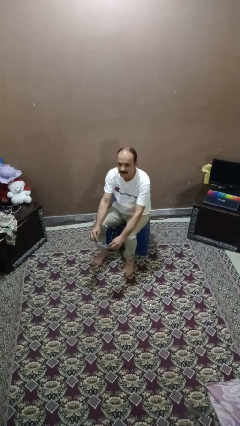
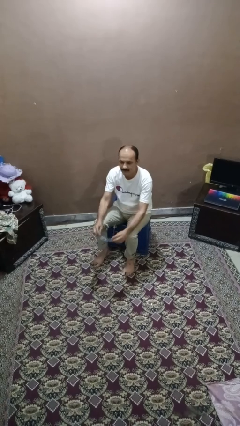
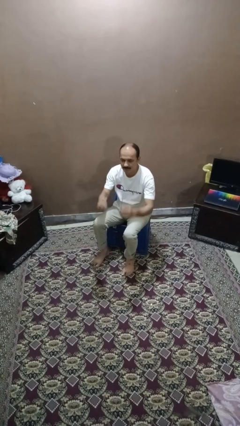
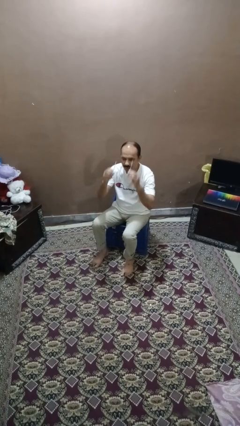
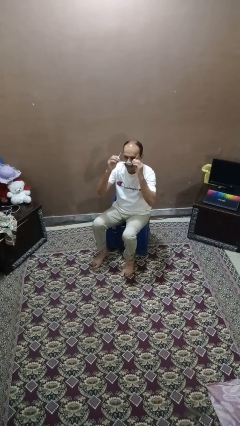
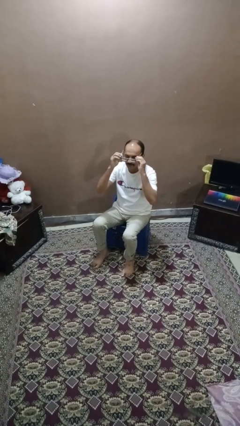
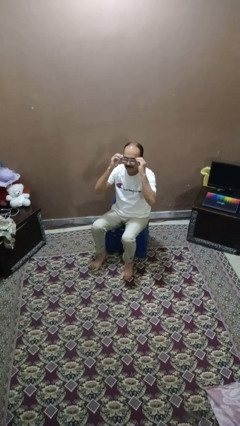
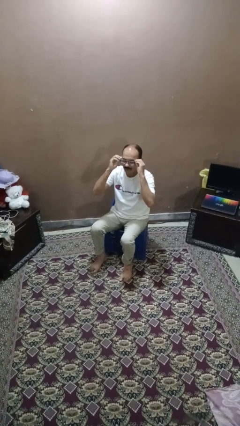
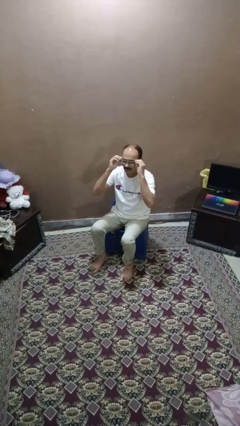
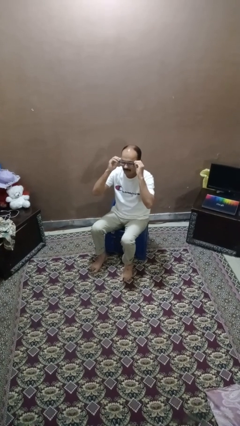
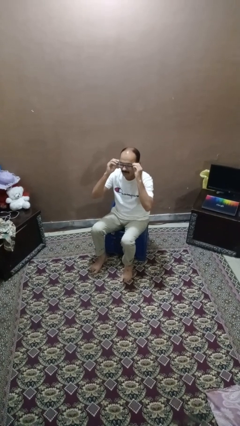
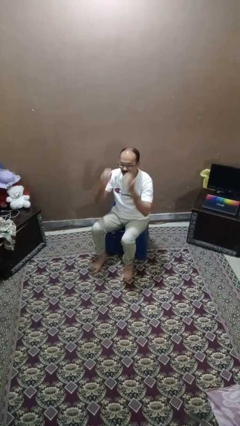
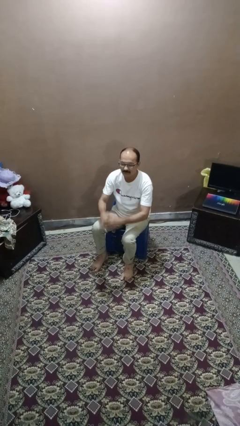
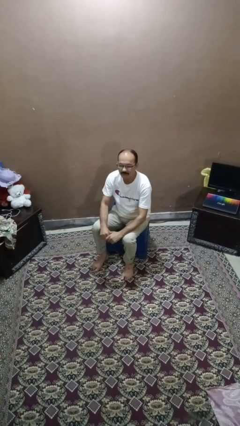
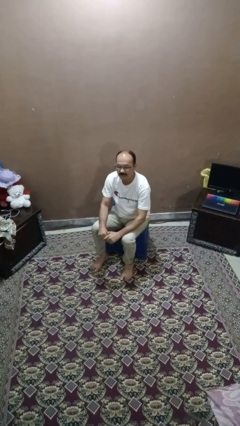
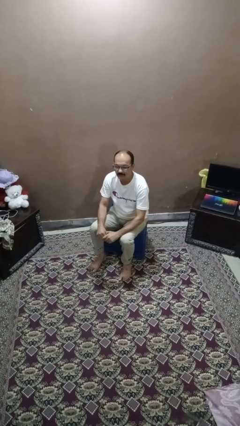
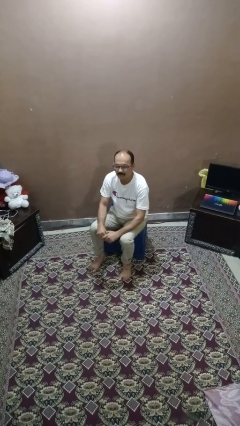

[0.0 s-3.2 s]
person puts on glasses

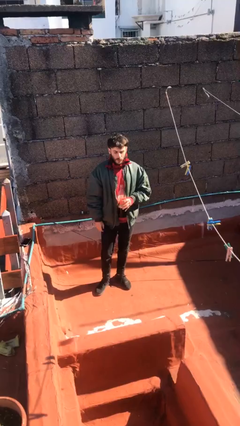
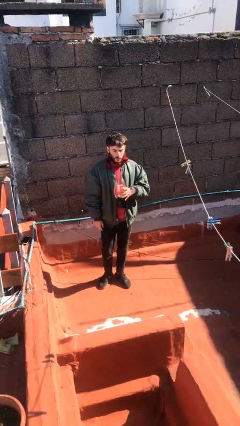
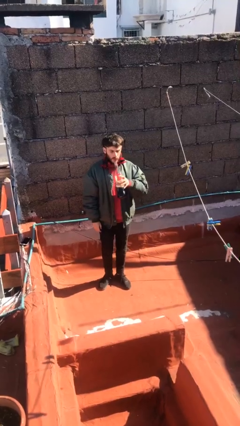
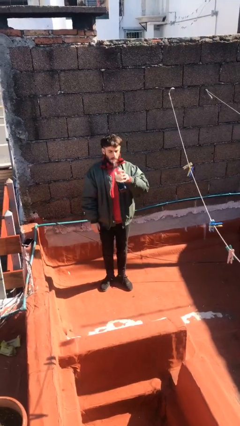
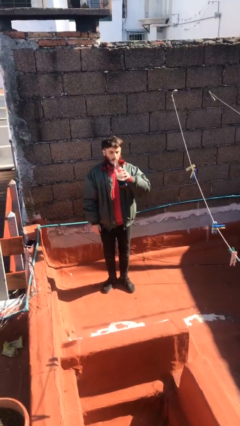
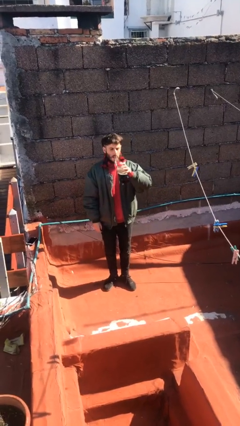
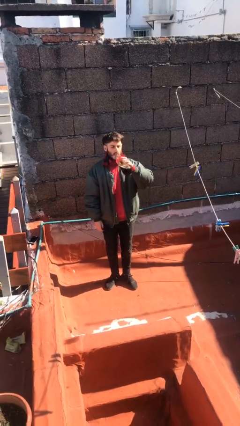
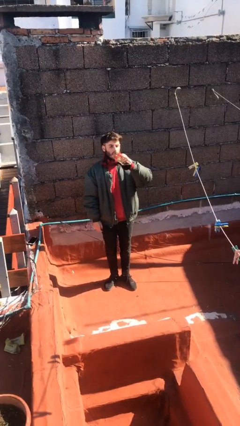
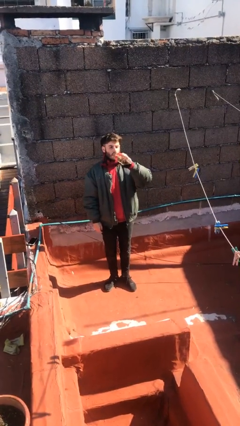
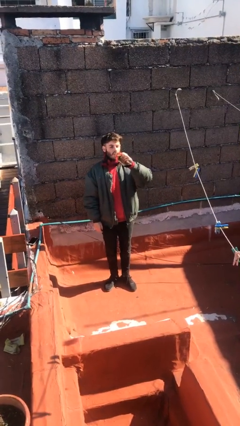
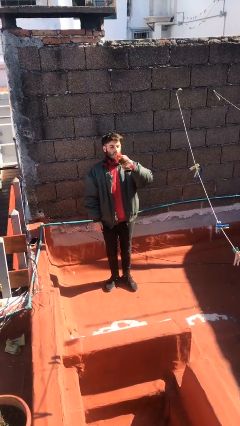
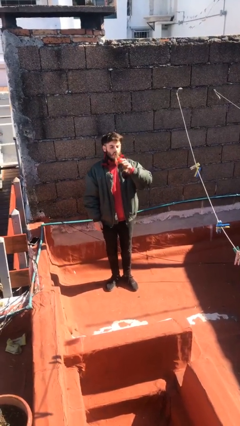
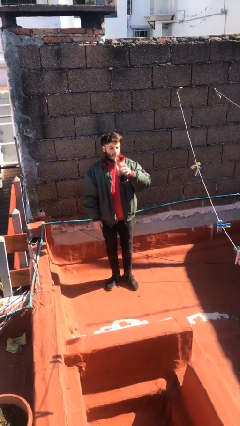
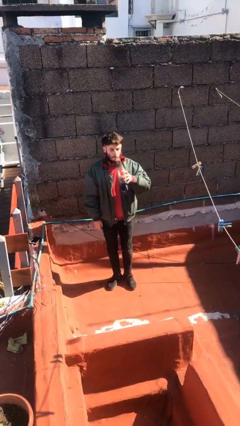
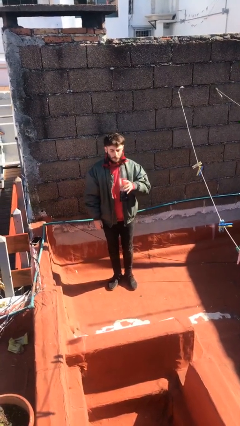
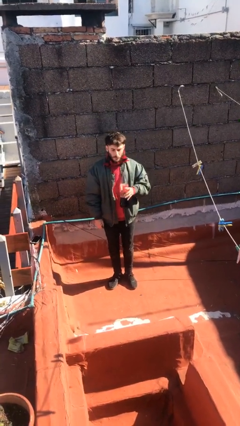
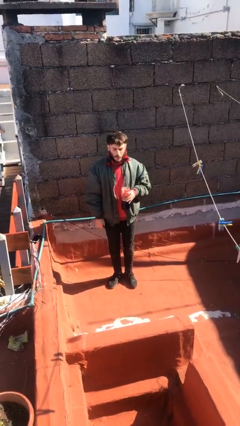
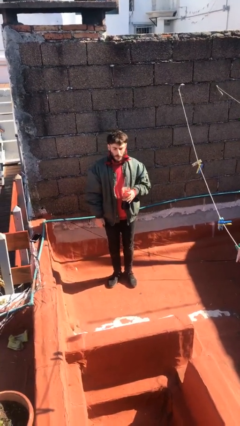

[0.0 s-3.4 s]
person drinks from bottle

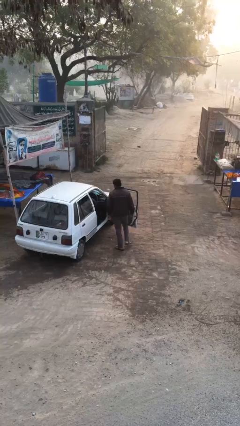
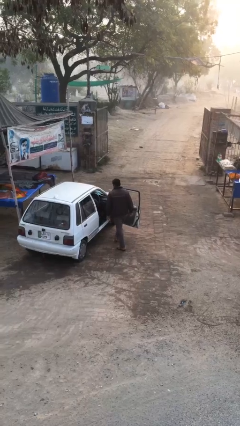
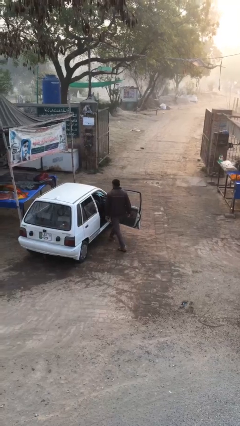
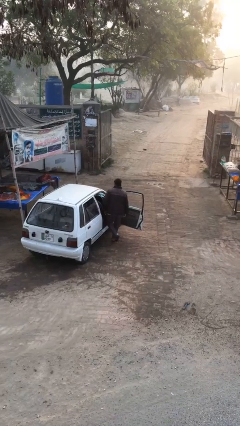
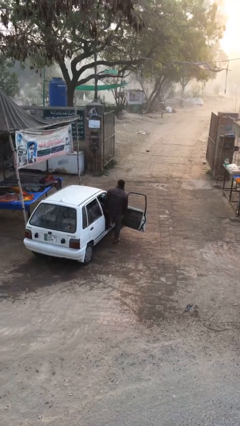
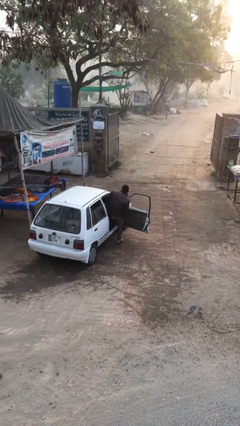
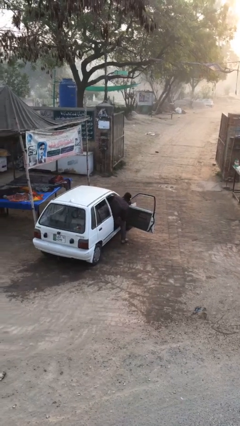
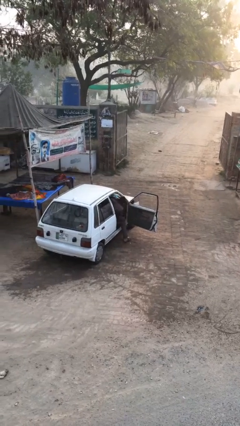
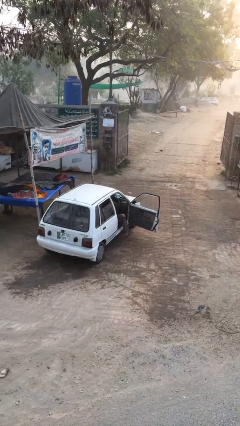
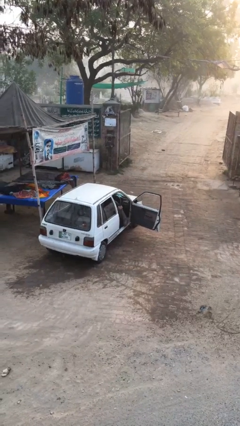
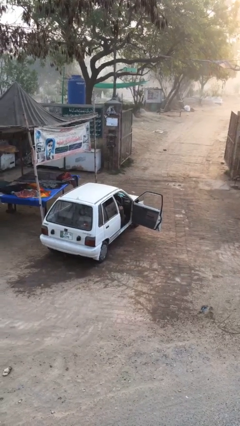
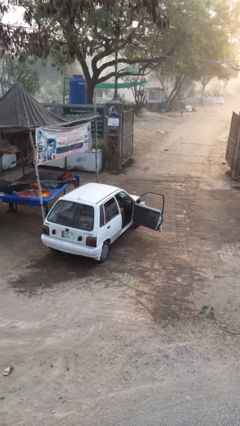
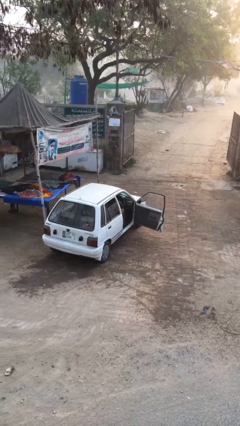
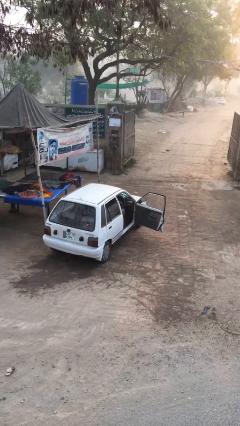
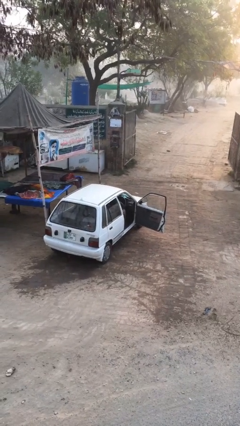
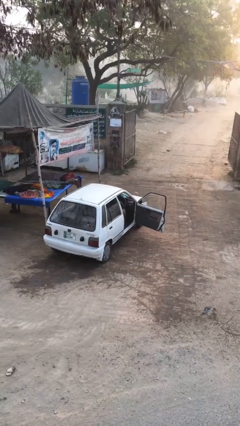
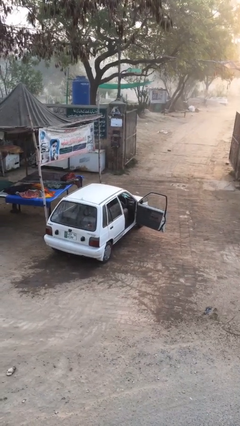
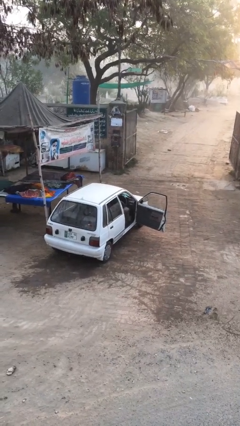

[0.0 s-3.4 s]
person enters car

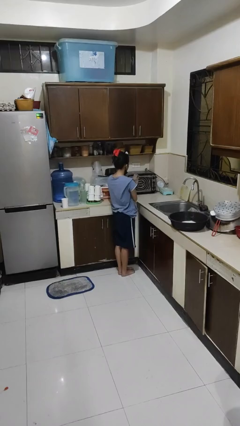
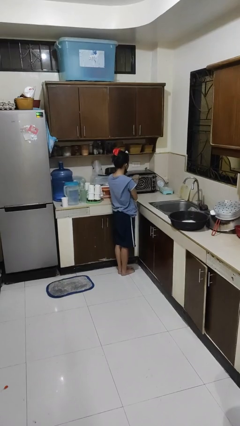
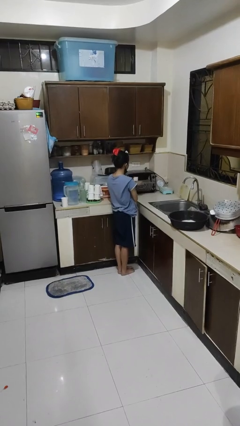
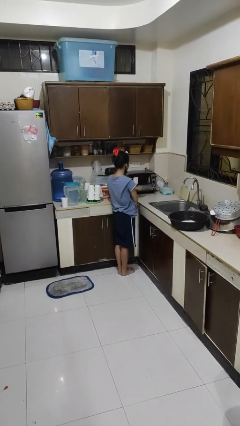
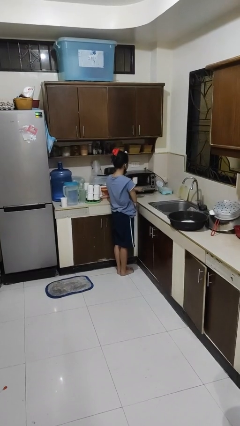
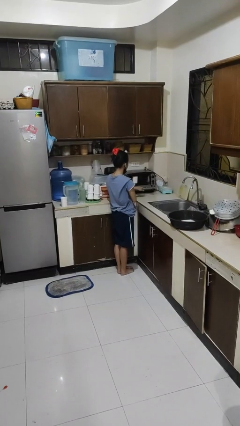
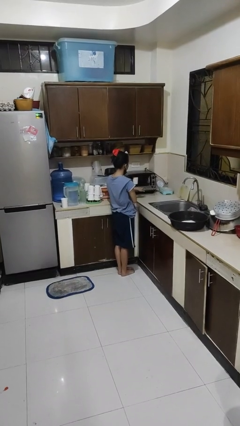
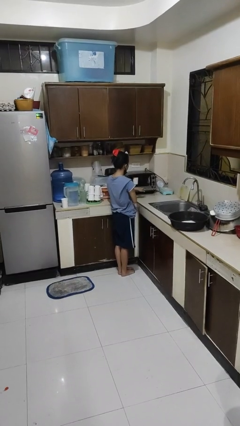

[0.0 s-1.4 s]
person opens microwave

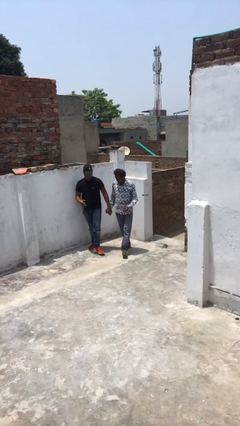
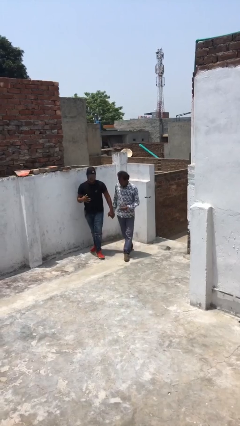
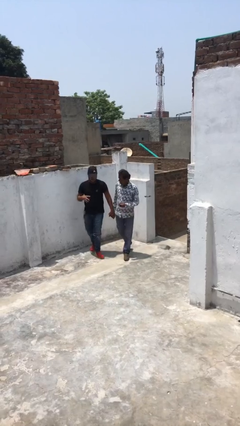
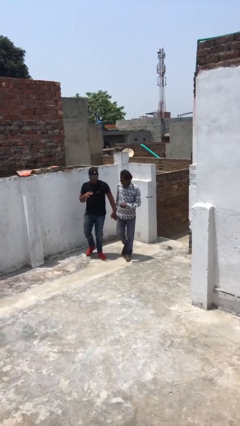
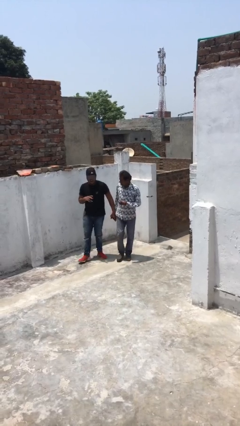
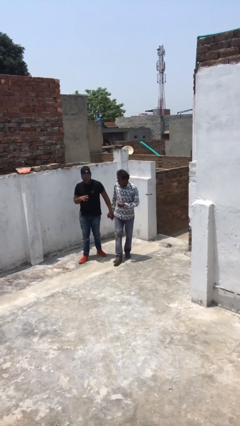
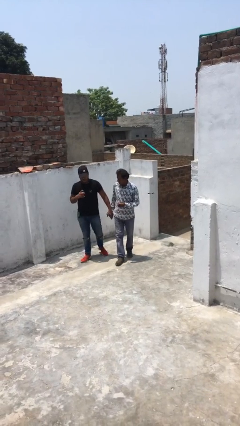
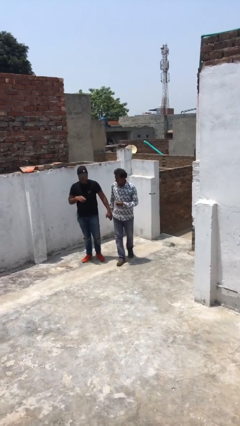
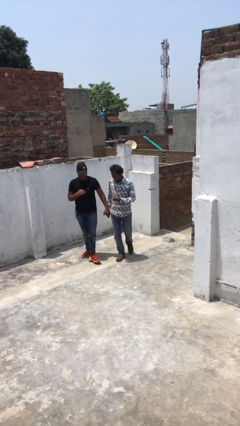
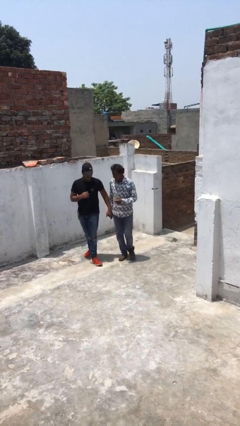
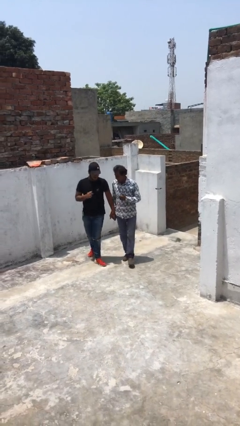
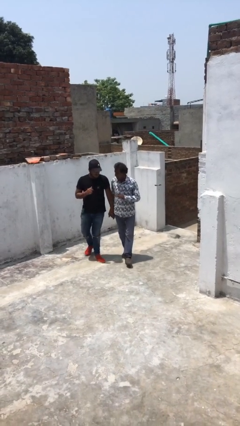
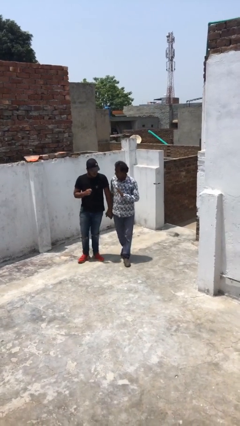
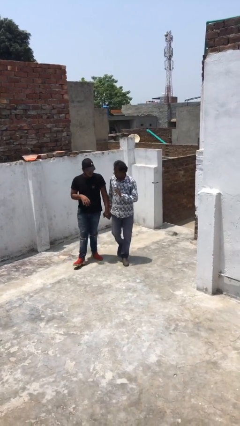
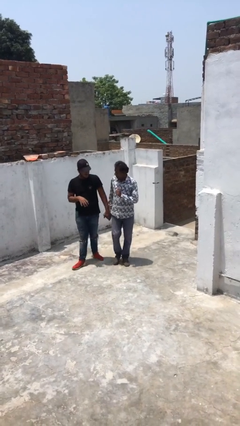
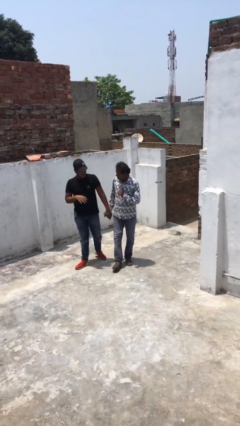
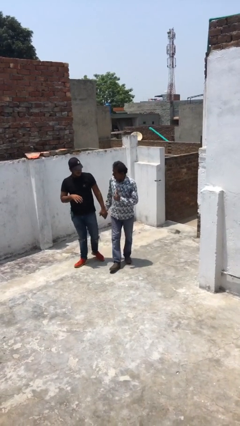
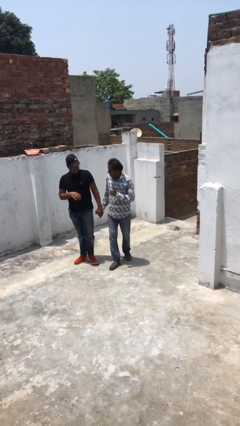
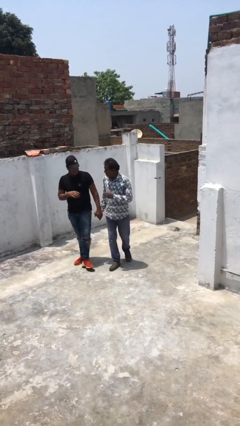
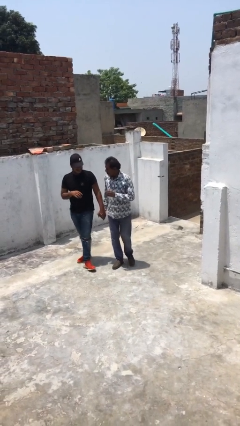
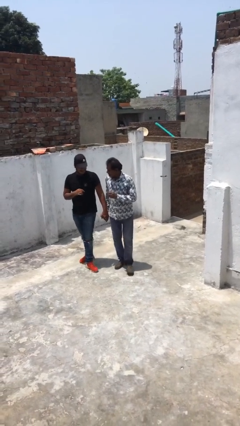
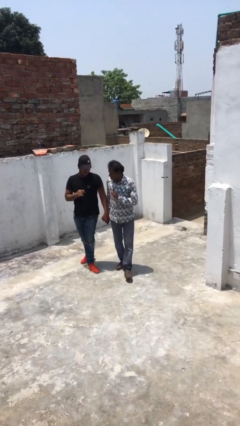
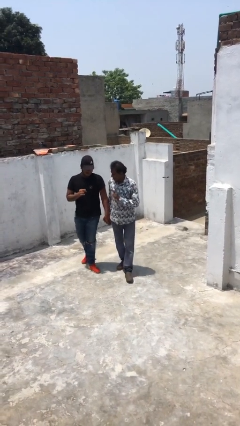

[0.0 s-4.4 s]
person holds hand

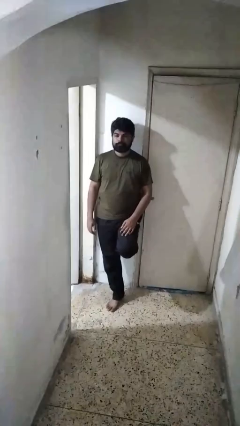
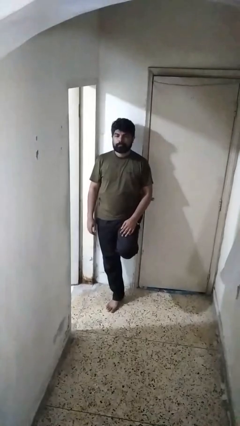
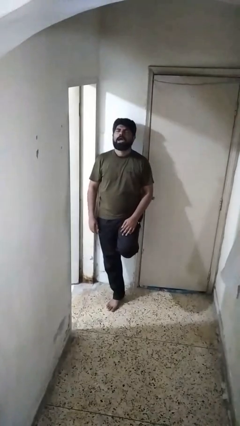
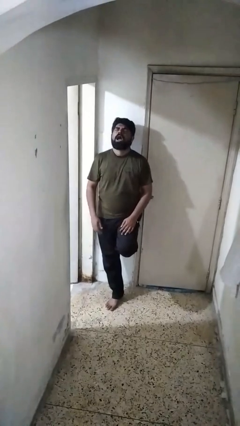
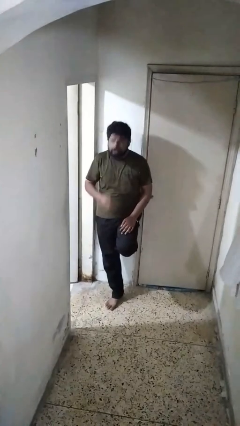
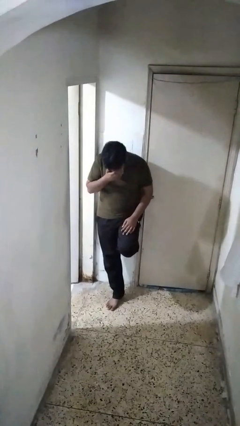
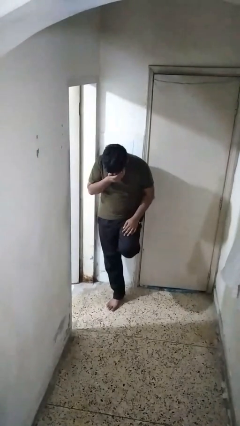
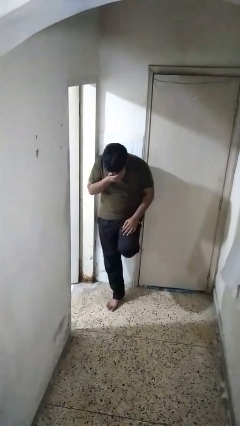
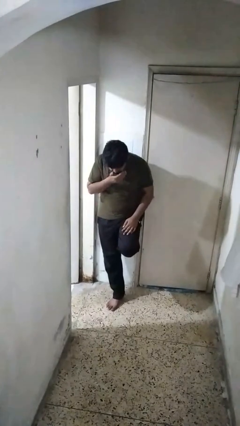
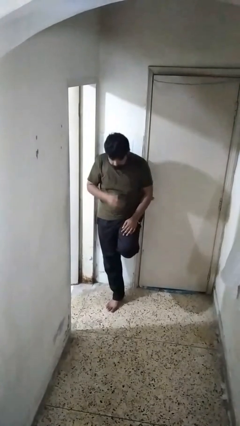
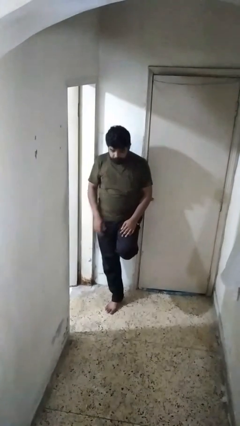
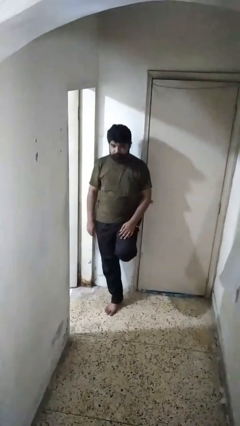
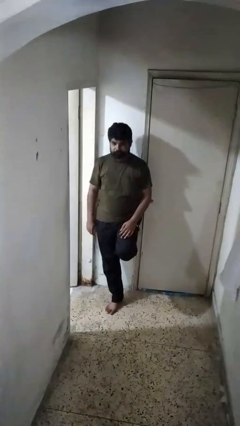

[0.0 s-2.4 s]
person sneezes into hand
